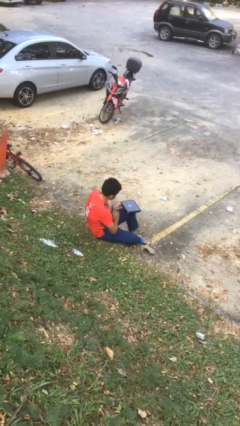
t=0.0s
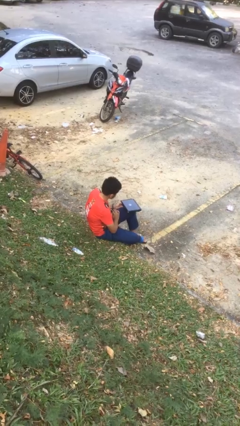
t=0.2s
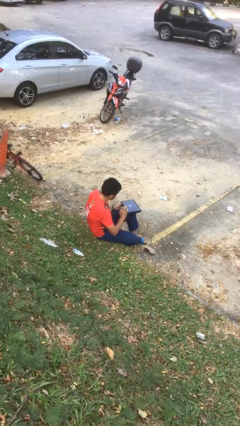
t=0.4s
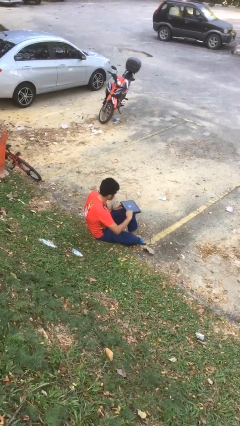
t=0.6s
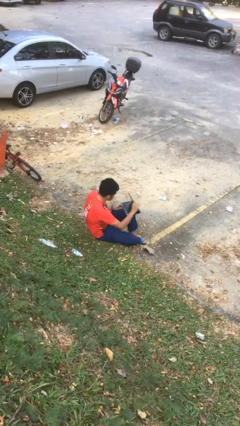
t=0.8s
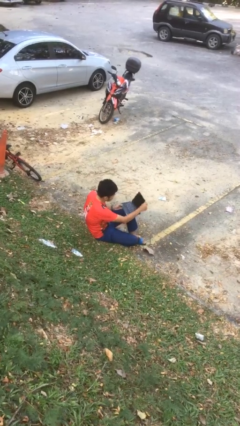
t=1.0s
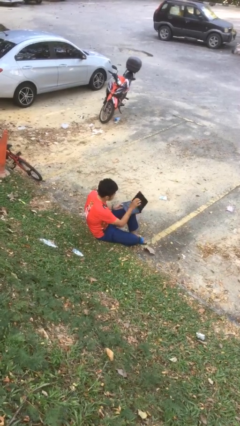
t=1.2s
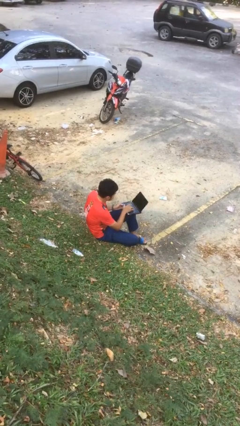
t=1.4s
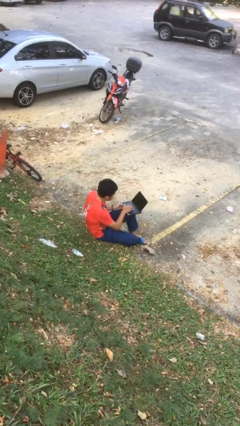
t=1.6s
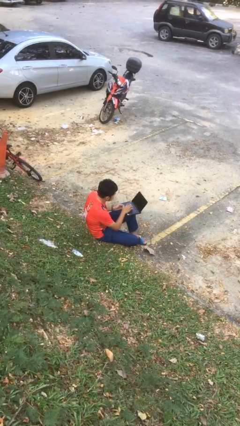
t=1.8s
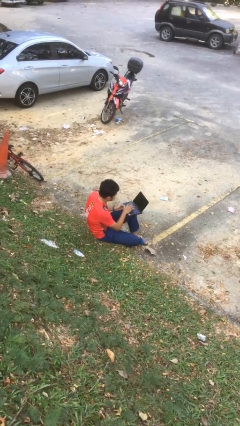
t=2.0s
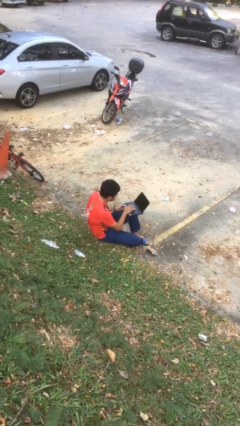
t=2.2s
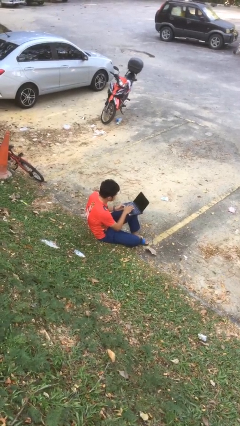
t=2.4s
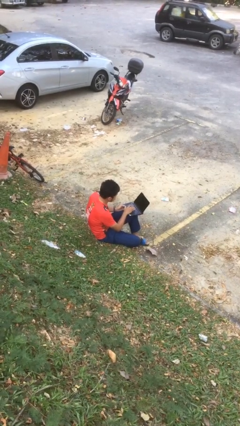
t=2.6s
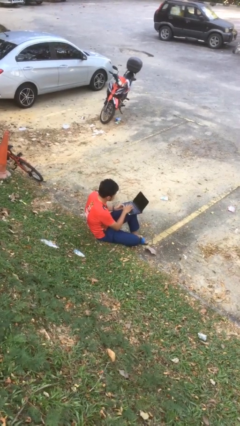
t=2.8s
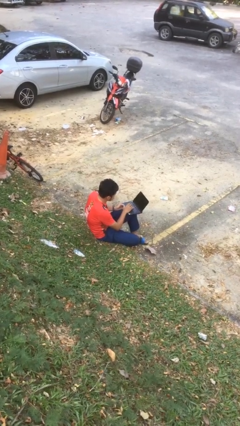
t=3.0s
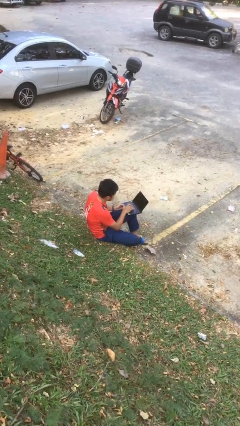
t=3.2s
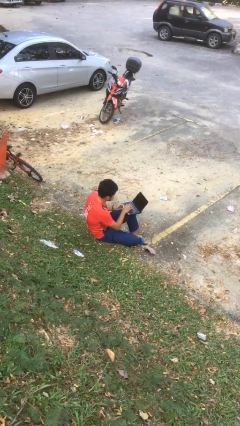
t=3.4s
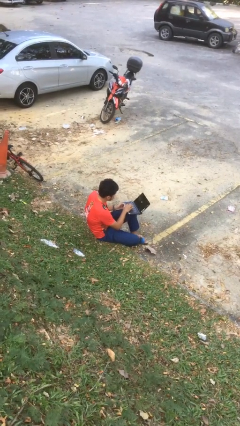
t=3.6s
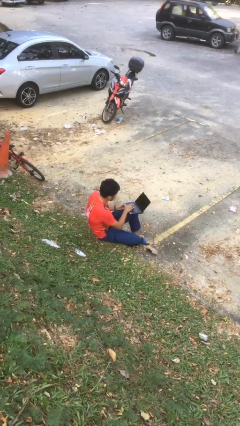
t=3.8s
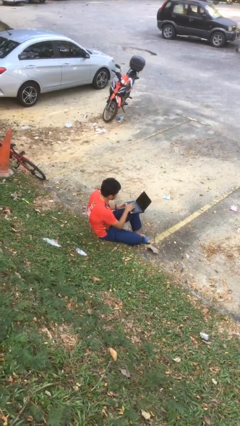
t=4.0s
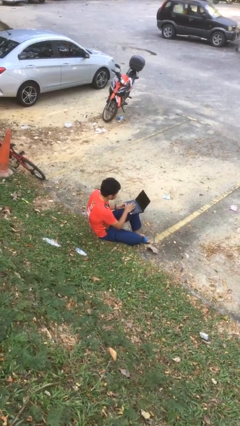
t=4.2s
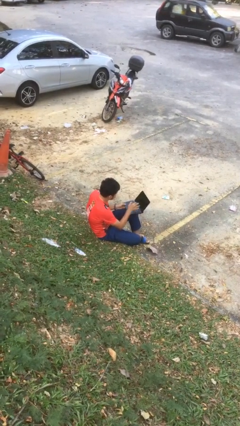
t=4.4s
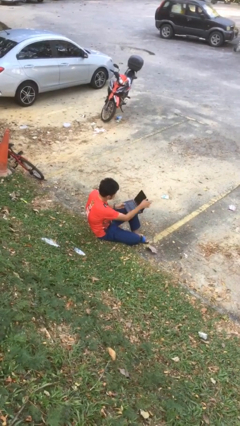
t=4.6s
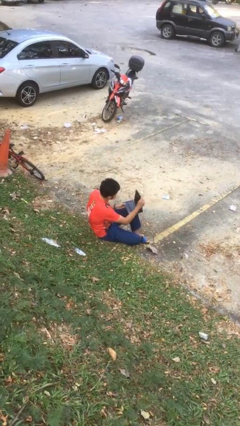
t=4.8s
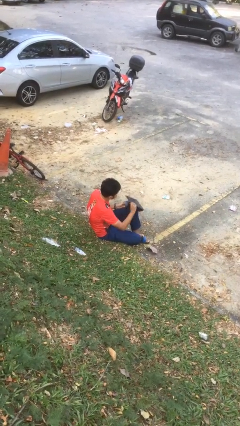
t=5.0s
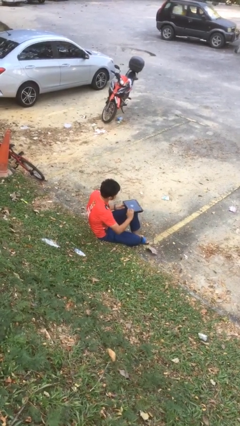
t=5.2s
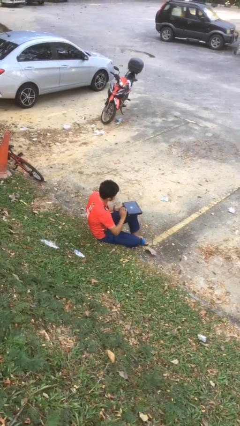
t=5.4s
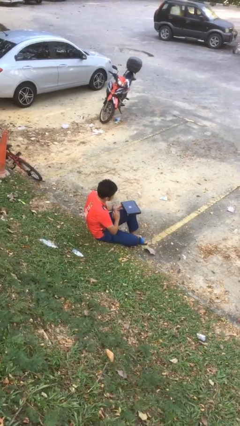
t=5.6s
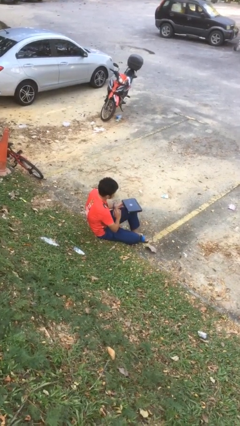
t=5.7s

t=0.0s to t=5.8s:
person interacts with laptop

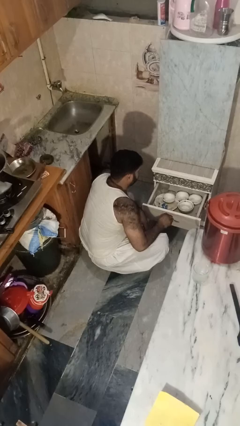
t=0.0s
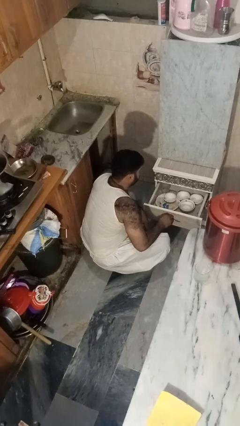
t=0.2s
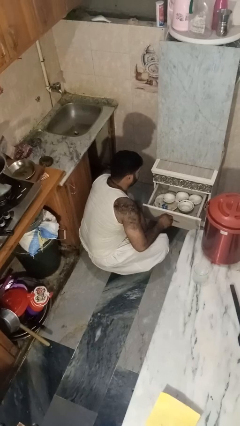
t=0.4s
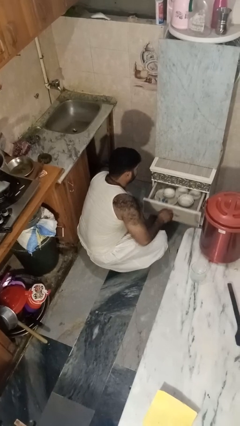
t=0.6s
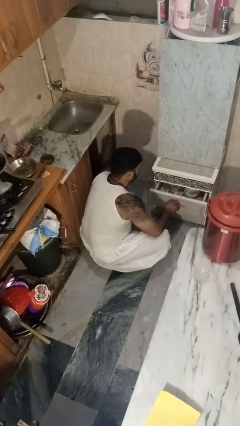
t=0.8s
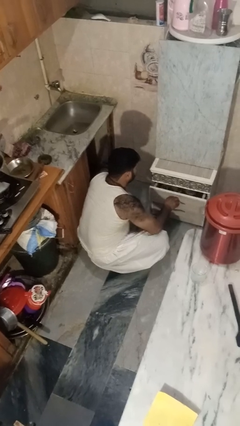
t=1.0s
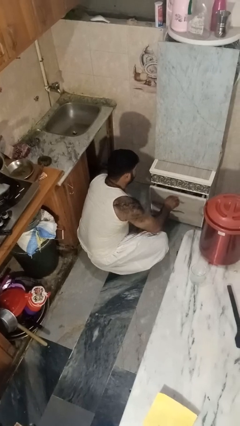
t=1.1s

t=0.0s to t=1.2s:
person closes kitchen drawer

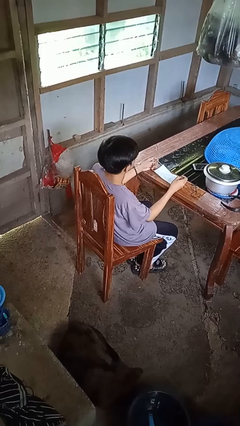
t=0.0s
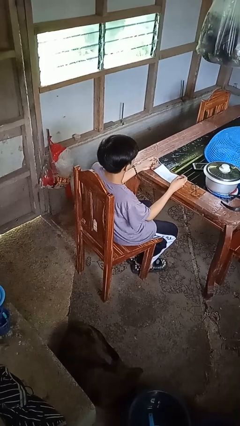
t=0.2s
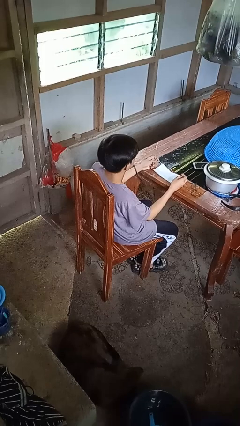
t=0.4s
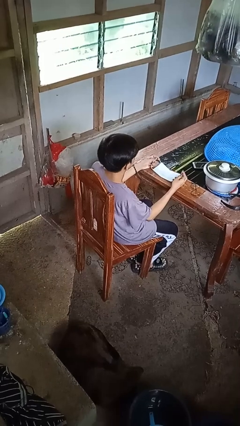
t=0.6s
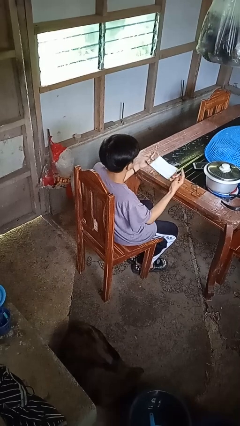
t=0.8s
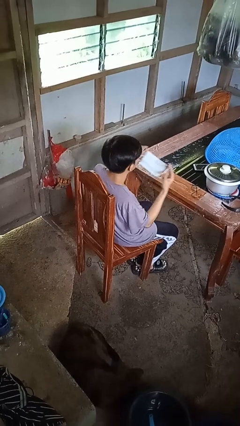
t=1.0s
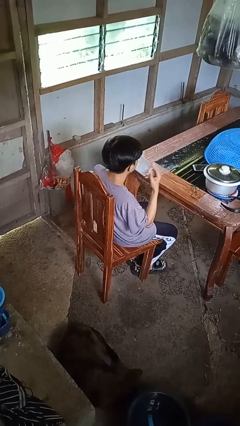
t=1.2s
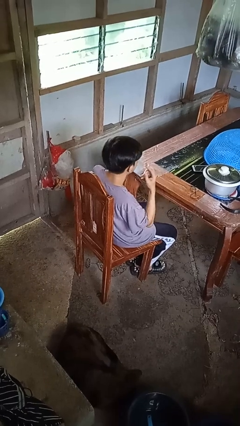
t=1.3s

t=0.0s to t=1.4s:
person puts on facemask

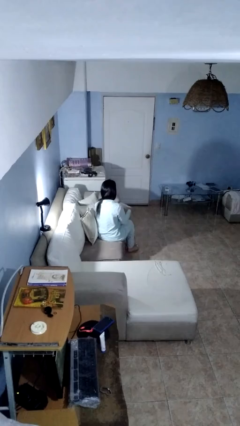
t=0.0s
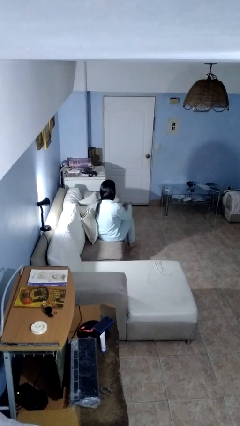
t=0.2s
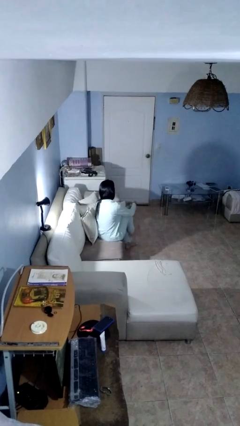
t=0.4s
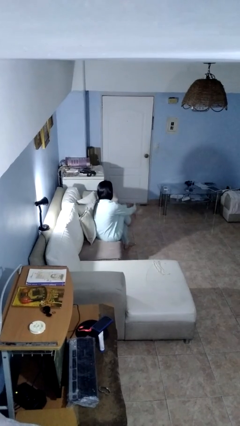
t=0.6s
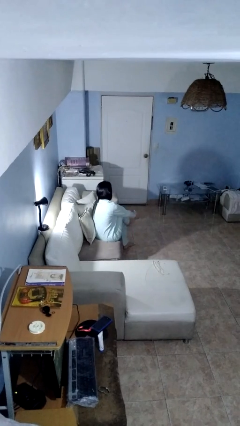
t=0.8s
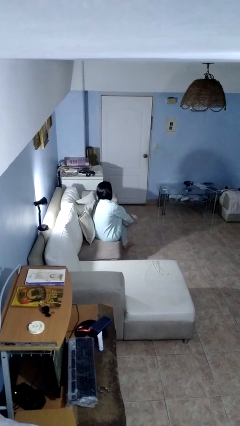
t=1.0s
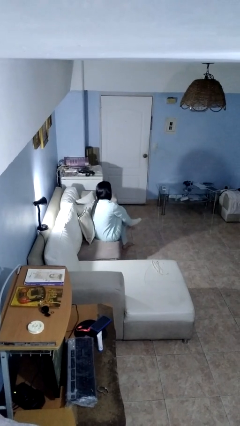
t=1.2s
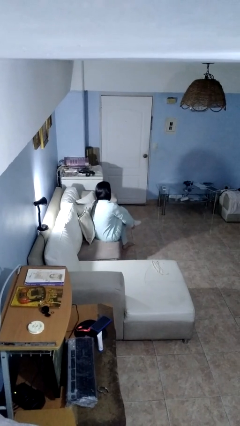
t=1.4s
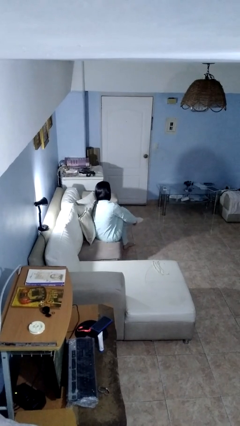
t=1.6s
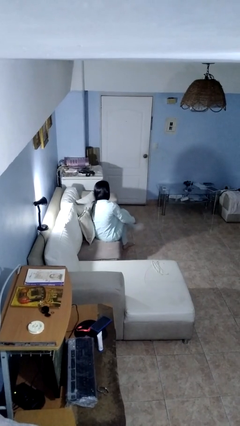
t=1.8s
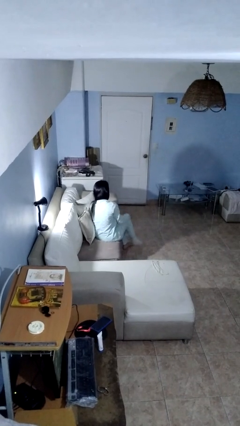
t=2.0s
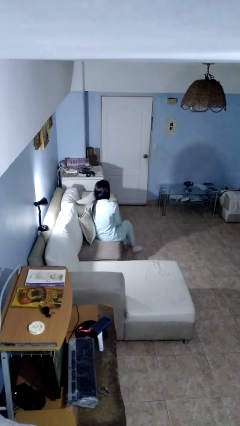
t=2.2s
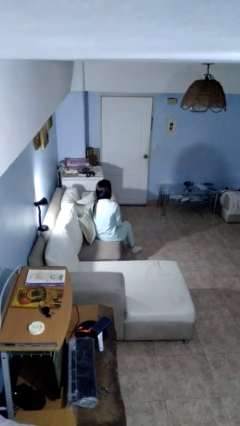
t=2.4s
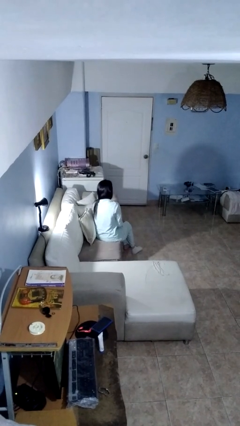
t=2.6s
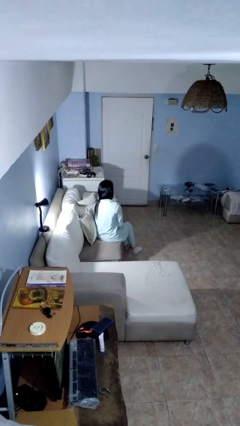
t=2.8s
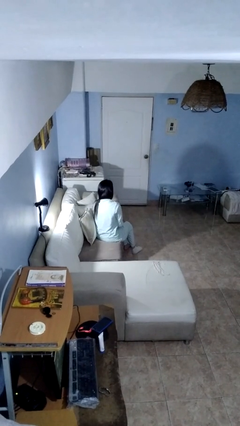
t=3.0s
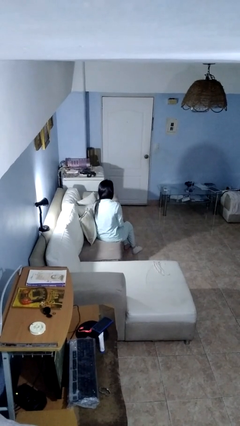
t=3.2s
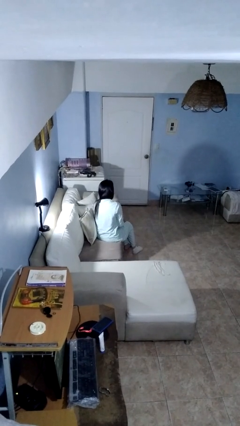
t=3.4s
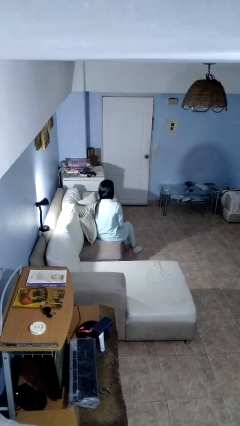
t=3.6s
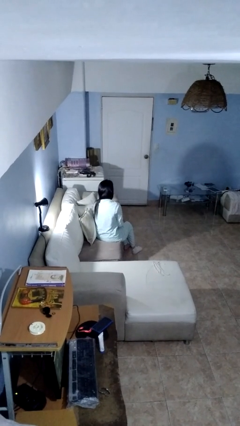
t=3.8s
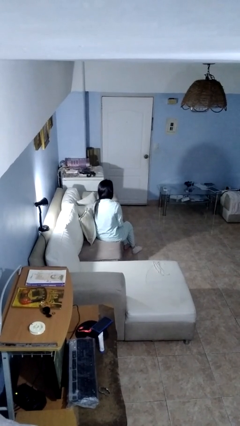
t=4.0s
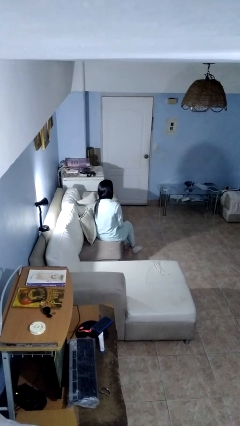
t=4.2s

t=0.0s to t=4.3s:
person puts on socks

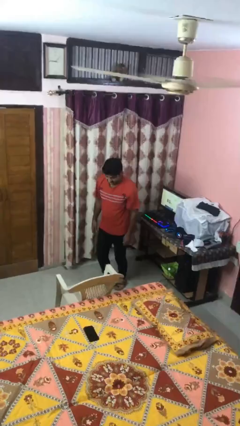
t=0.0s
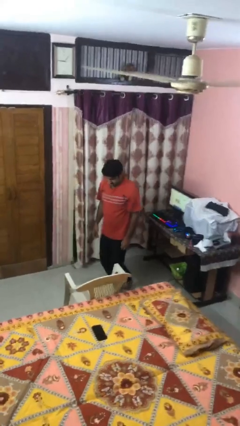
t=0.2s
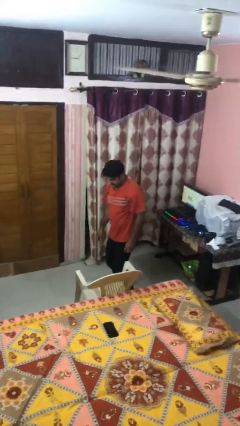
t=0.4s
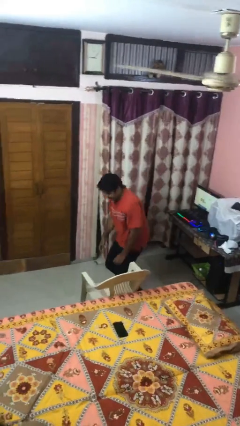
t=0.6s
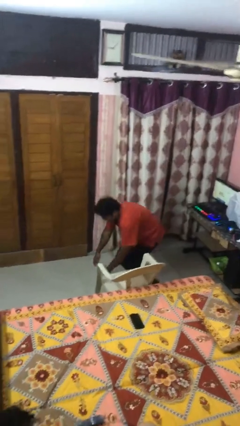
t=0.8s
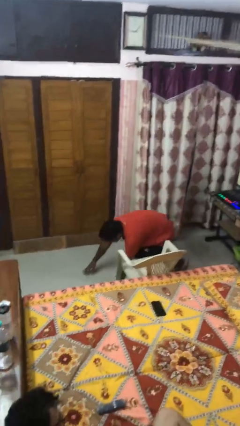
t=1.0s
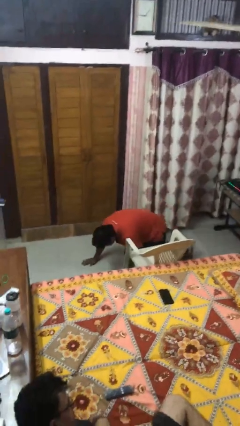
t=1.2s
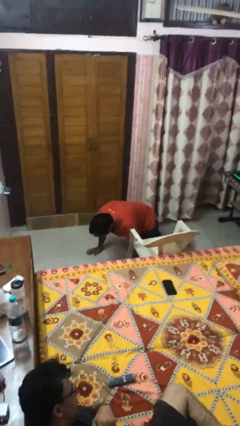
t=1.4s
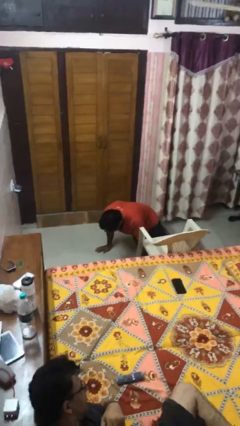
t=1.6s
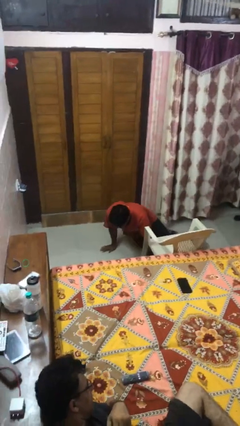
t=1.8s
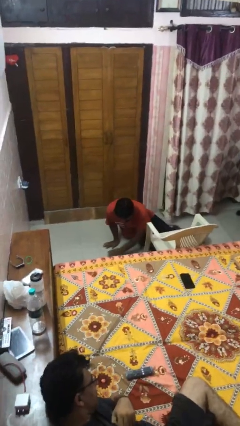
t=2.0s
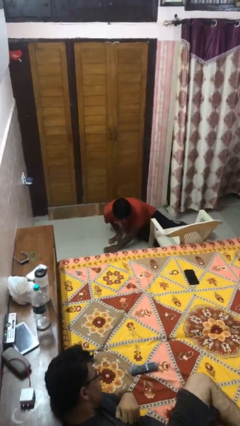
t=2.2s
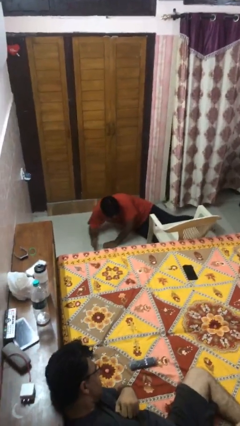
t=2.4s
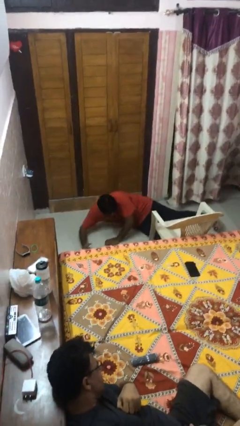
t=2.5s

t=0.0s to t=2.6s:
person trips on object on floor

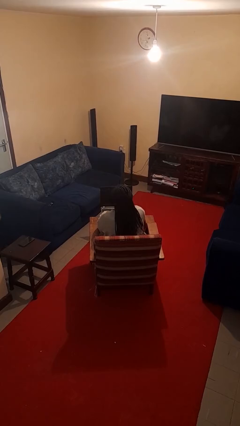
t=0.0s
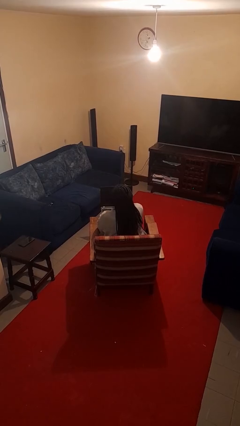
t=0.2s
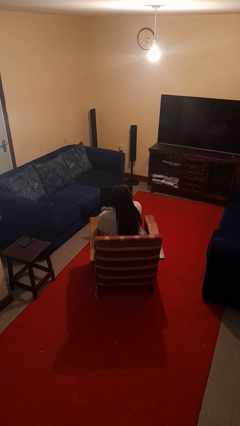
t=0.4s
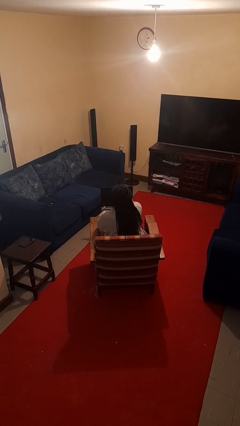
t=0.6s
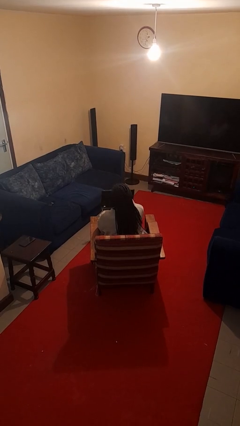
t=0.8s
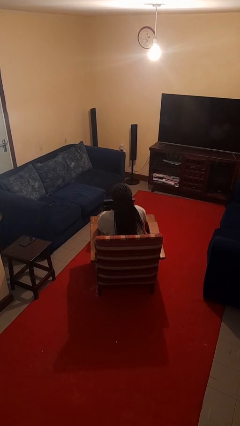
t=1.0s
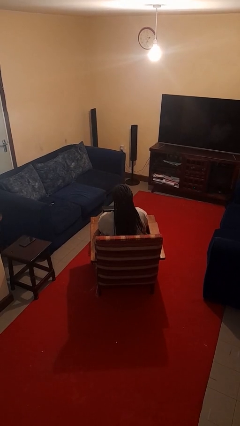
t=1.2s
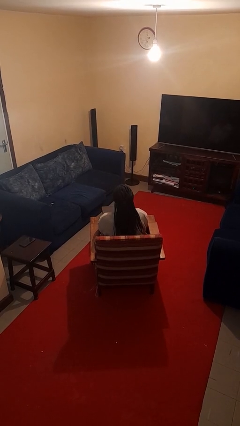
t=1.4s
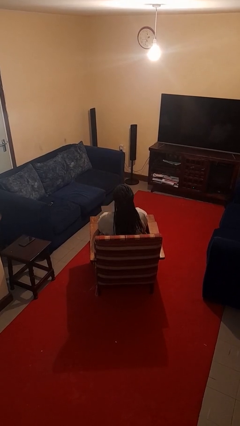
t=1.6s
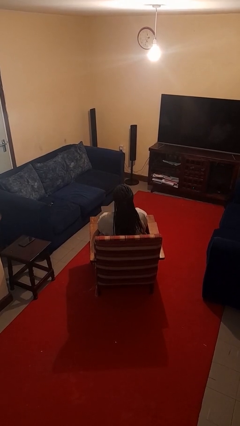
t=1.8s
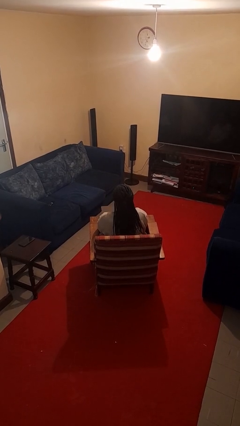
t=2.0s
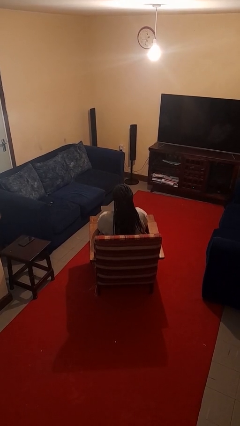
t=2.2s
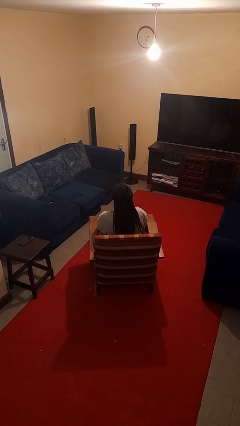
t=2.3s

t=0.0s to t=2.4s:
person closes laptop
